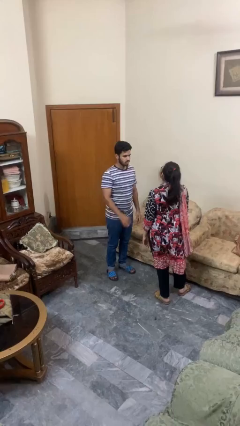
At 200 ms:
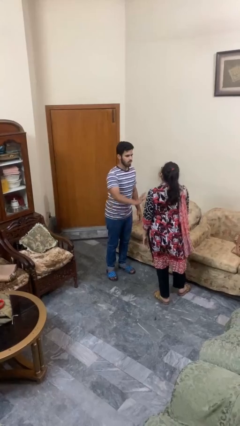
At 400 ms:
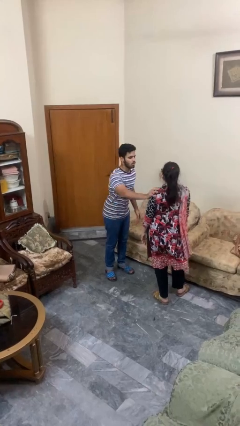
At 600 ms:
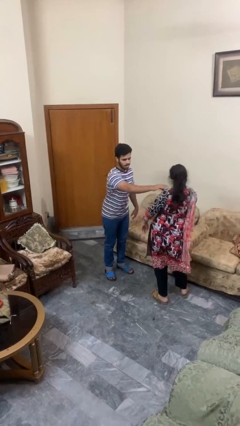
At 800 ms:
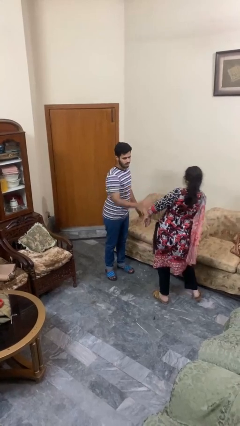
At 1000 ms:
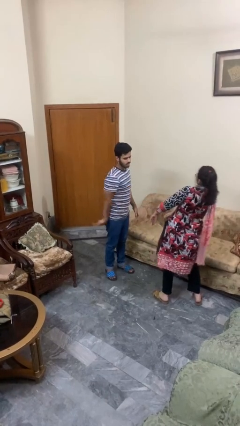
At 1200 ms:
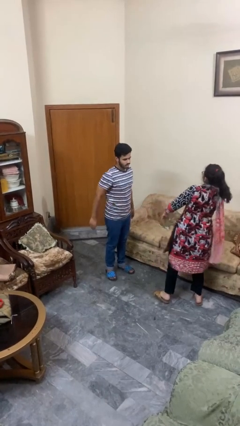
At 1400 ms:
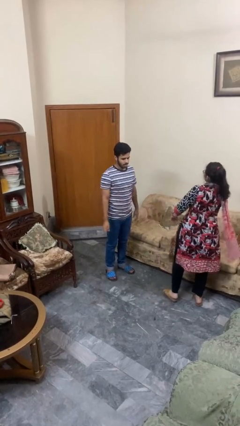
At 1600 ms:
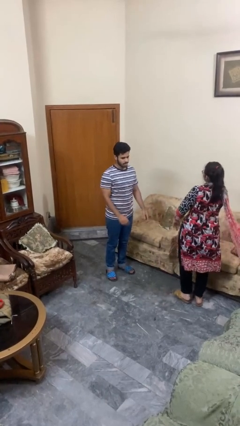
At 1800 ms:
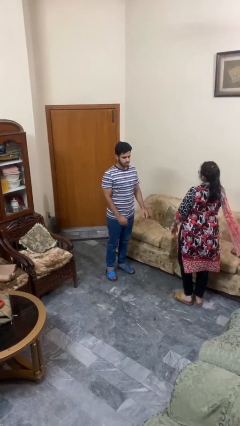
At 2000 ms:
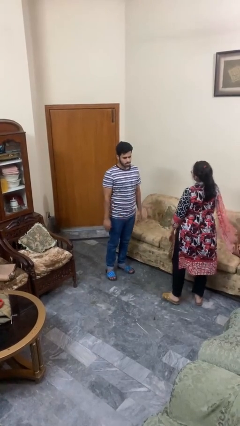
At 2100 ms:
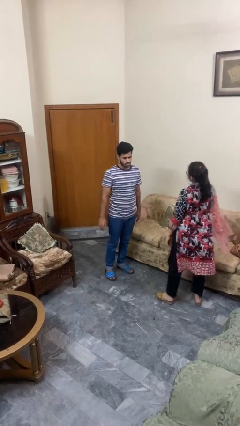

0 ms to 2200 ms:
person shoves person

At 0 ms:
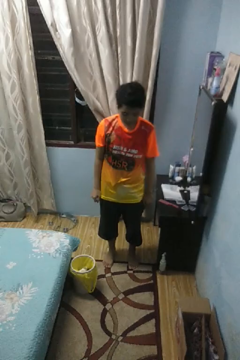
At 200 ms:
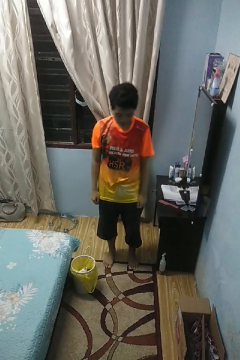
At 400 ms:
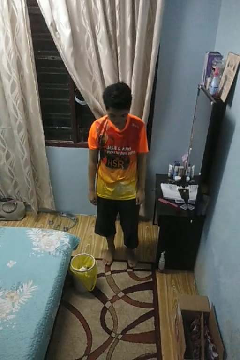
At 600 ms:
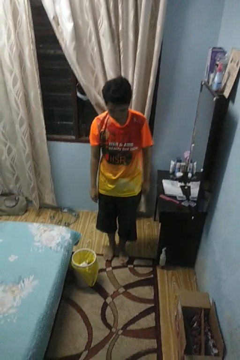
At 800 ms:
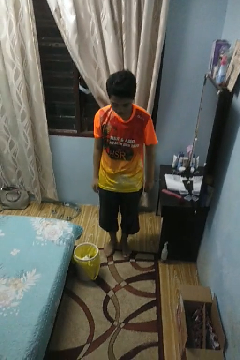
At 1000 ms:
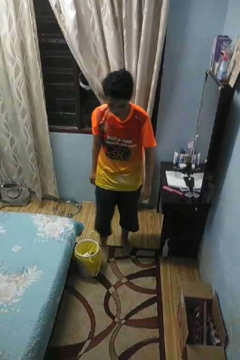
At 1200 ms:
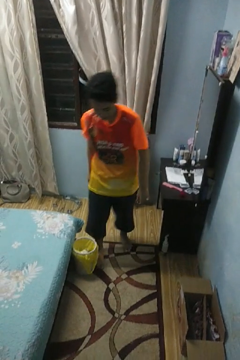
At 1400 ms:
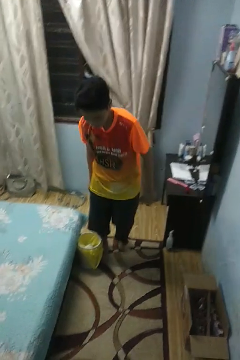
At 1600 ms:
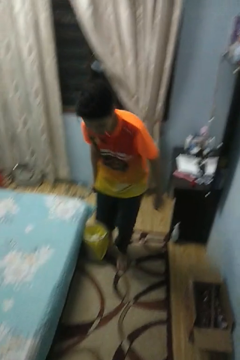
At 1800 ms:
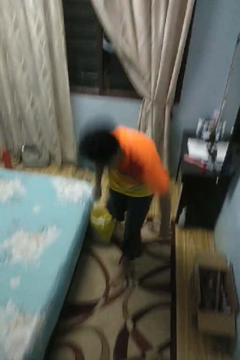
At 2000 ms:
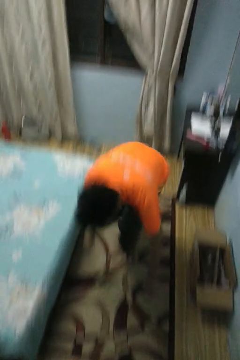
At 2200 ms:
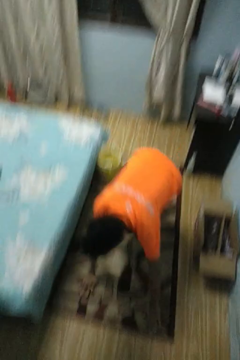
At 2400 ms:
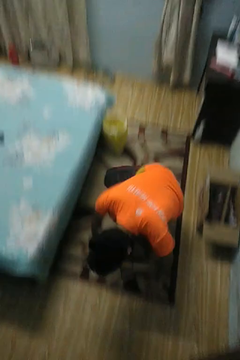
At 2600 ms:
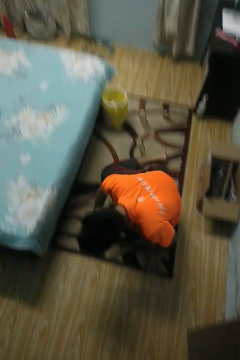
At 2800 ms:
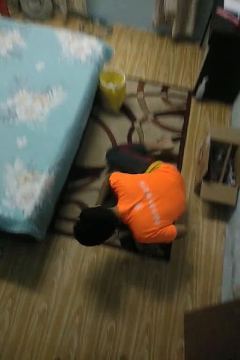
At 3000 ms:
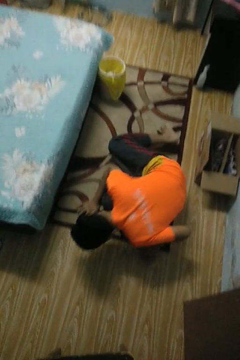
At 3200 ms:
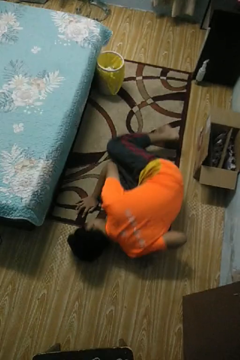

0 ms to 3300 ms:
person trips on object on floor

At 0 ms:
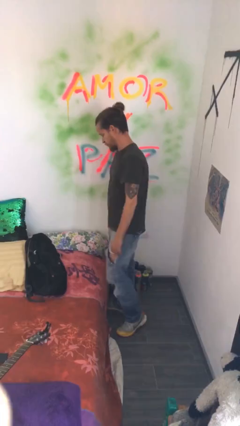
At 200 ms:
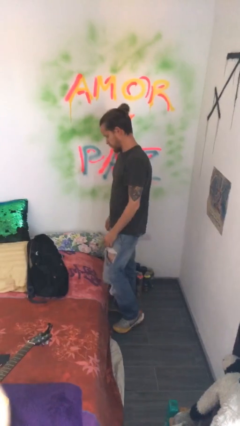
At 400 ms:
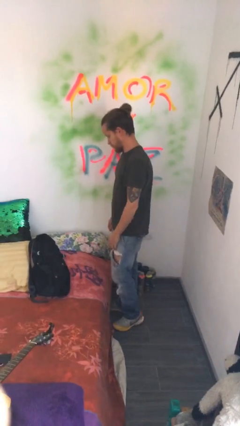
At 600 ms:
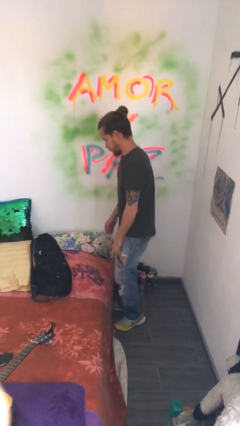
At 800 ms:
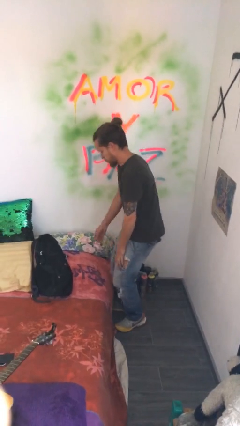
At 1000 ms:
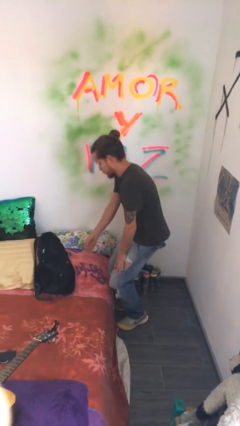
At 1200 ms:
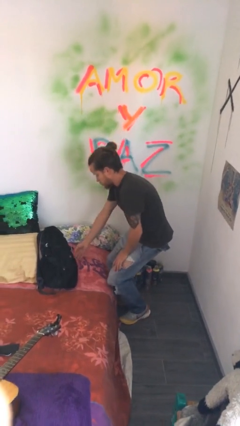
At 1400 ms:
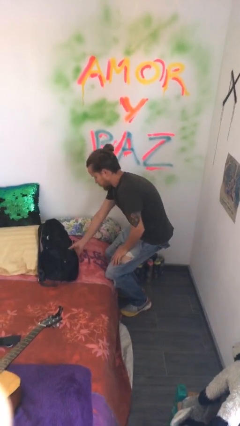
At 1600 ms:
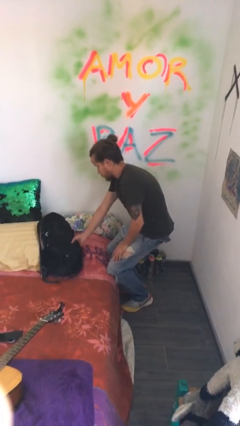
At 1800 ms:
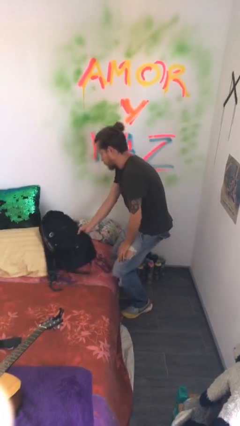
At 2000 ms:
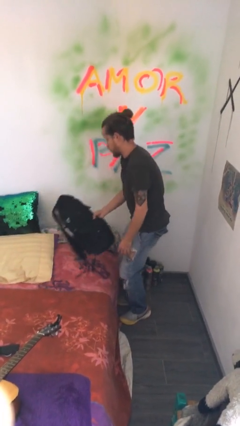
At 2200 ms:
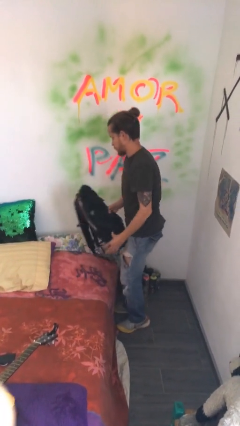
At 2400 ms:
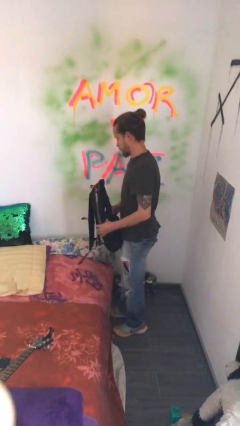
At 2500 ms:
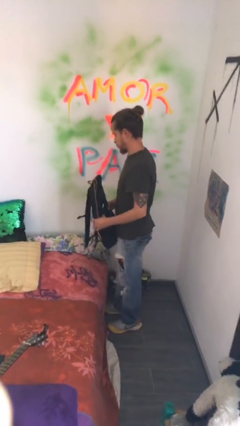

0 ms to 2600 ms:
person picks up object from bed

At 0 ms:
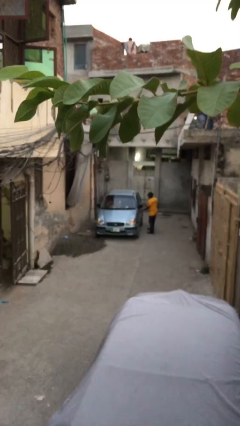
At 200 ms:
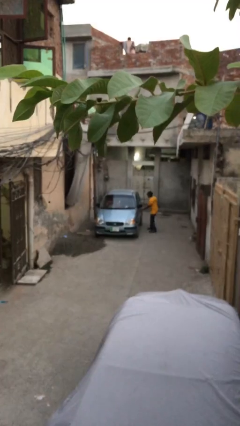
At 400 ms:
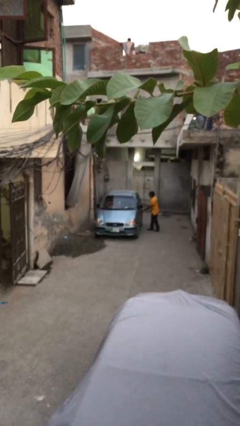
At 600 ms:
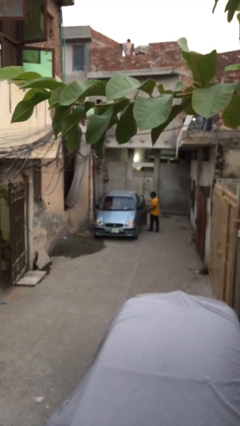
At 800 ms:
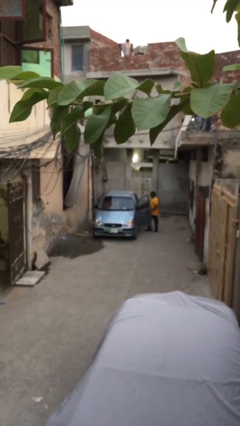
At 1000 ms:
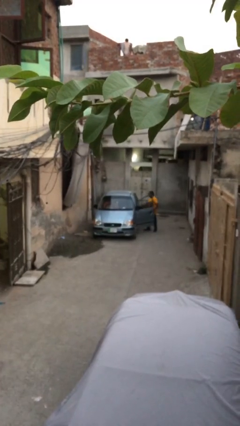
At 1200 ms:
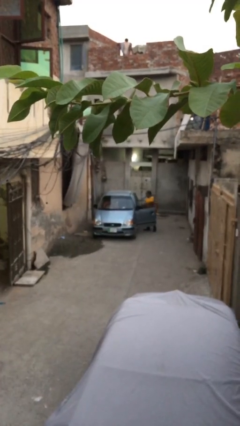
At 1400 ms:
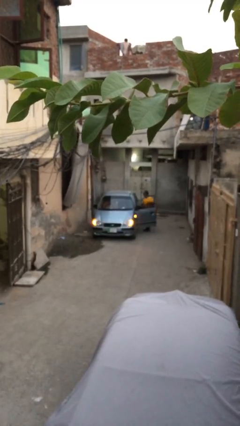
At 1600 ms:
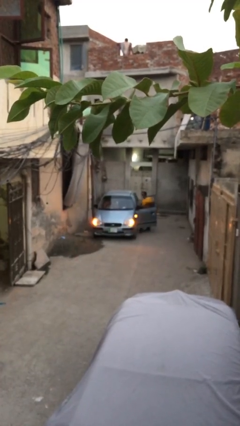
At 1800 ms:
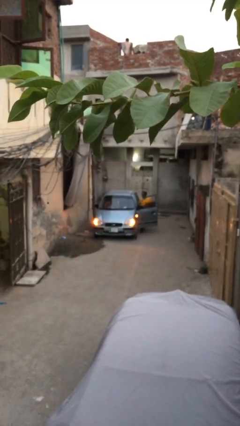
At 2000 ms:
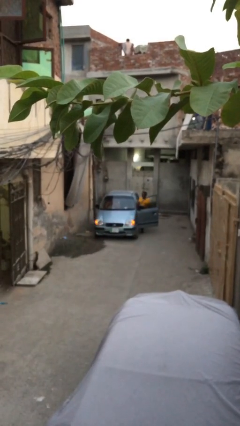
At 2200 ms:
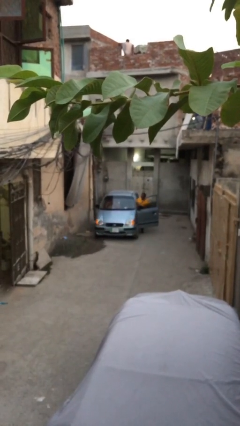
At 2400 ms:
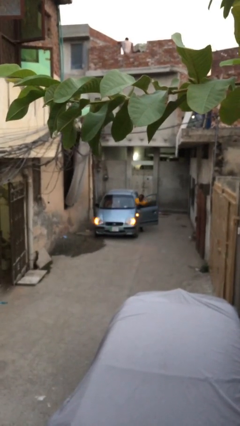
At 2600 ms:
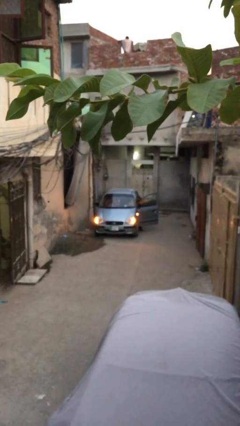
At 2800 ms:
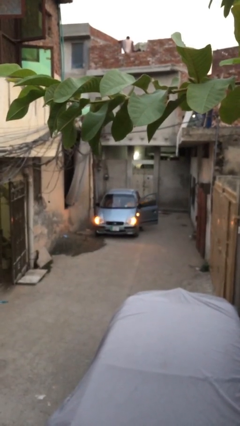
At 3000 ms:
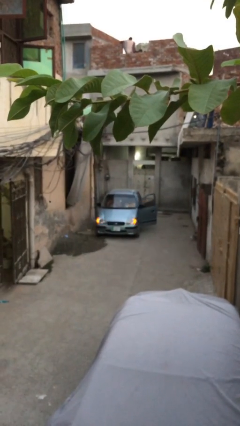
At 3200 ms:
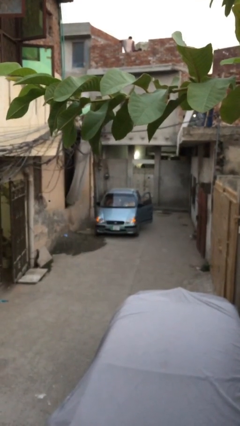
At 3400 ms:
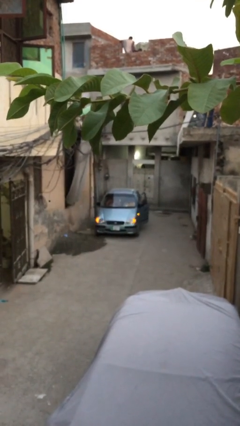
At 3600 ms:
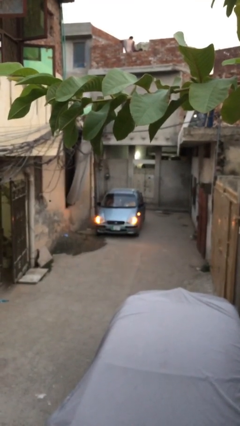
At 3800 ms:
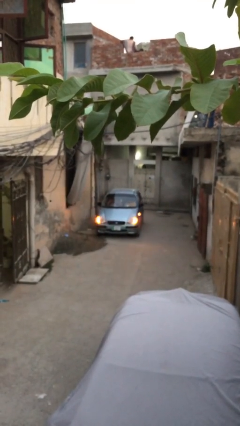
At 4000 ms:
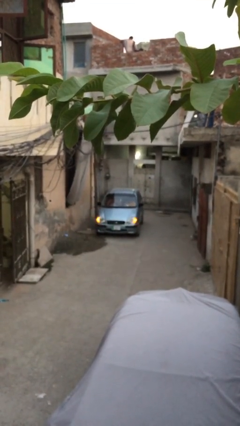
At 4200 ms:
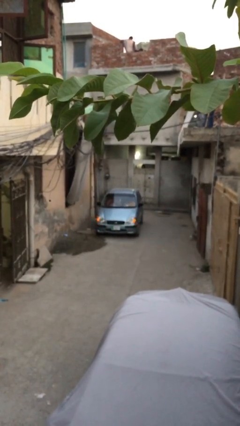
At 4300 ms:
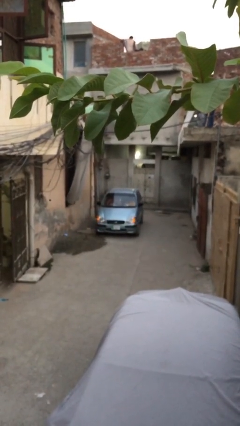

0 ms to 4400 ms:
car picks up person

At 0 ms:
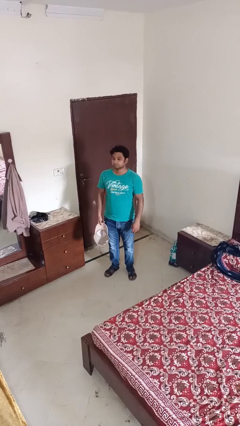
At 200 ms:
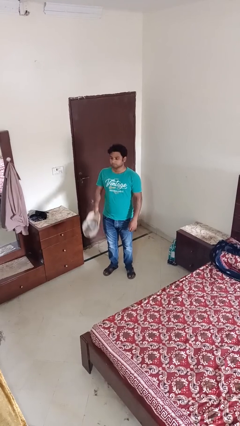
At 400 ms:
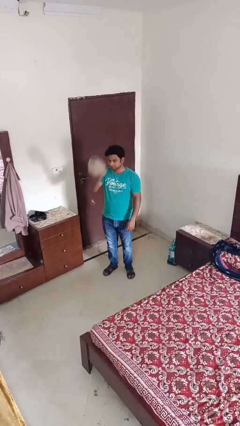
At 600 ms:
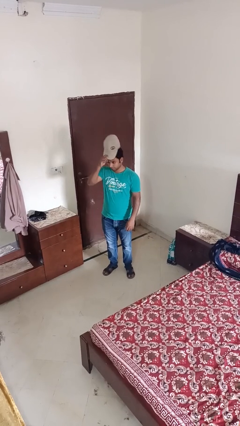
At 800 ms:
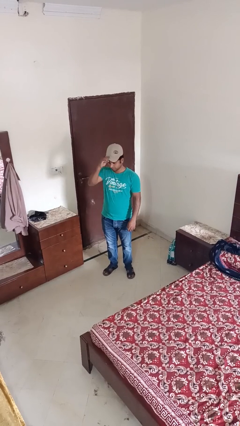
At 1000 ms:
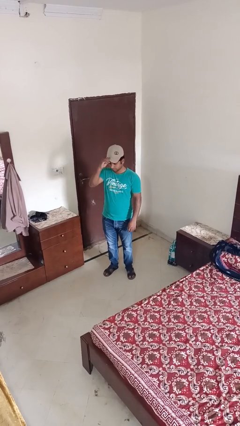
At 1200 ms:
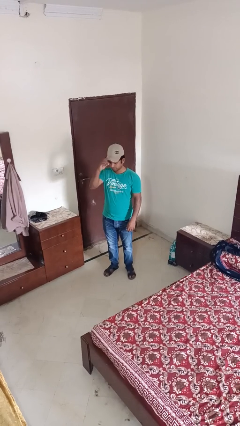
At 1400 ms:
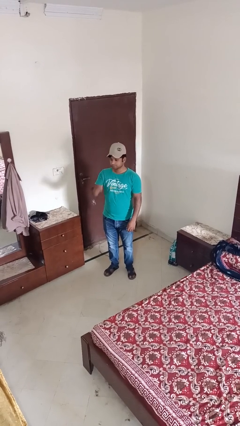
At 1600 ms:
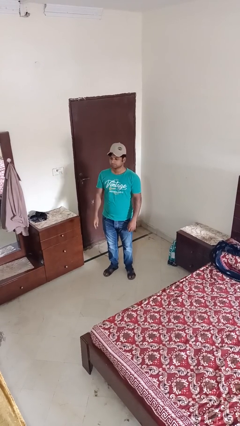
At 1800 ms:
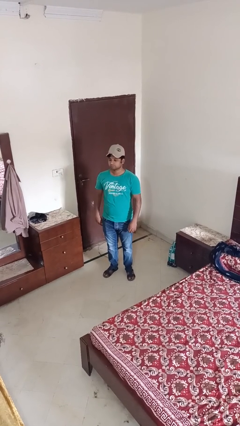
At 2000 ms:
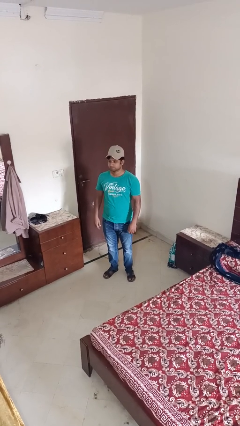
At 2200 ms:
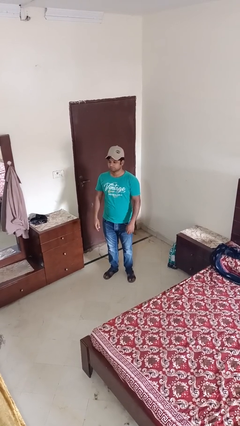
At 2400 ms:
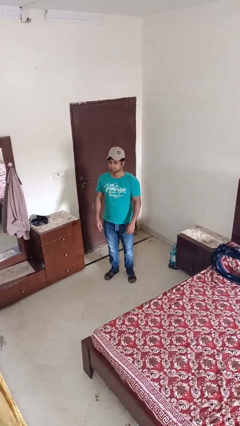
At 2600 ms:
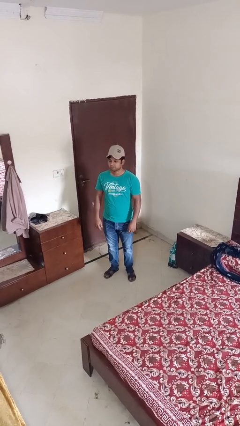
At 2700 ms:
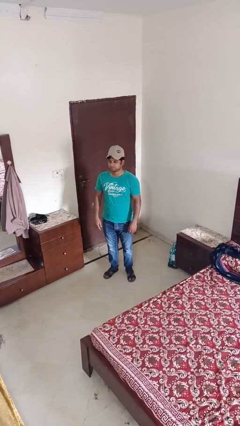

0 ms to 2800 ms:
person puts on hat

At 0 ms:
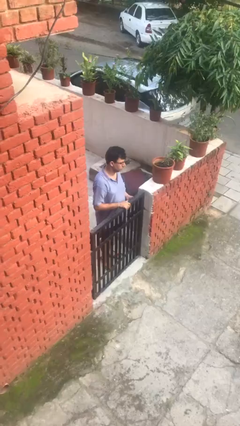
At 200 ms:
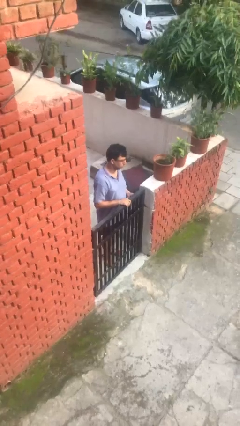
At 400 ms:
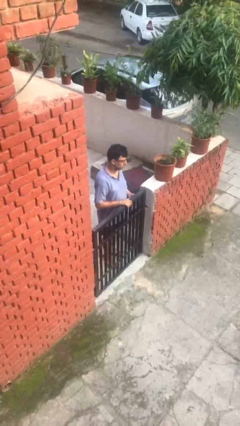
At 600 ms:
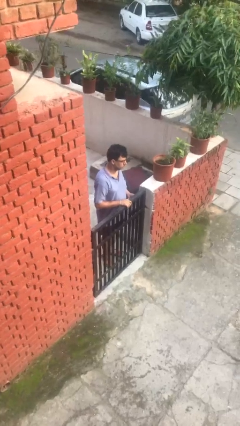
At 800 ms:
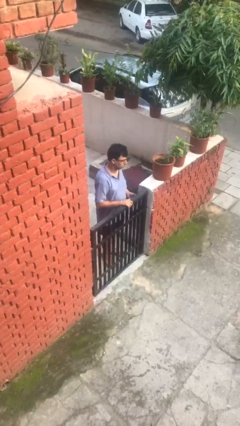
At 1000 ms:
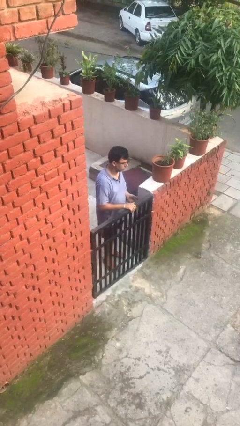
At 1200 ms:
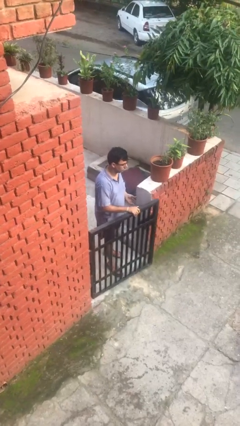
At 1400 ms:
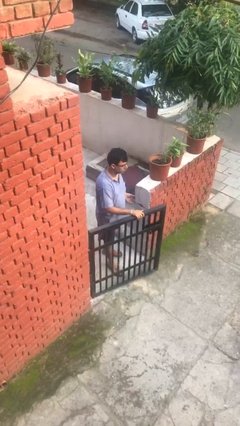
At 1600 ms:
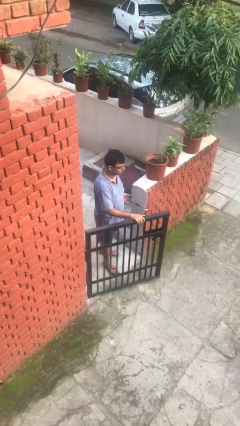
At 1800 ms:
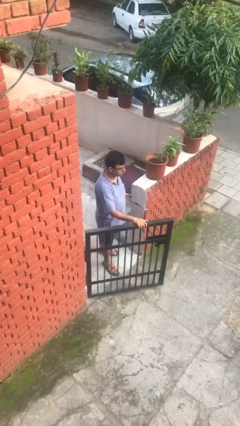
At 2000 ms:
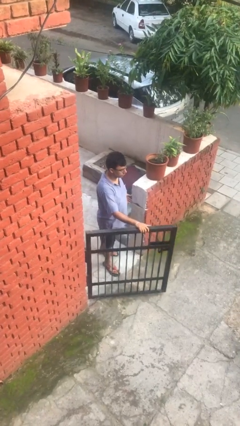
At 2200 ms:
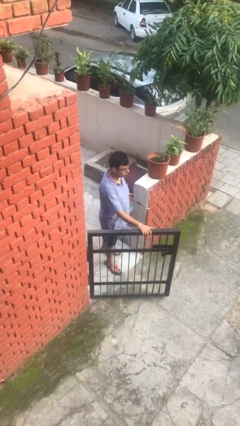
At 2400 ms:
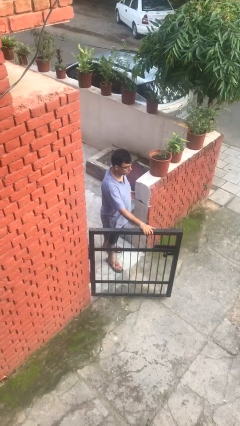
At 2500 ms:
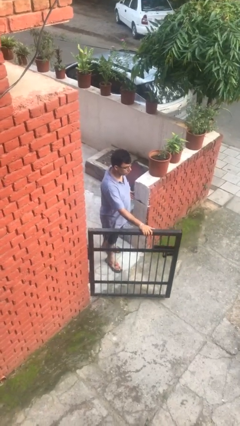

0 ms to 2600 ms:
person opens gate

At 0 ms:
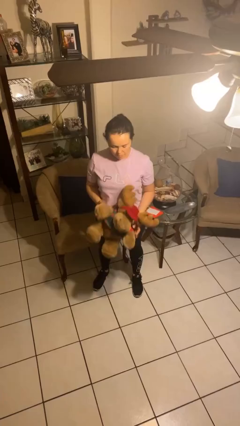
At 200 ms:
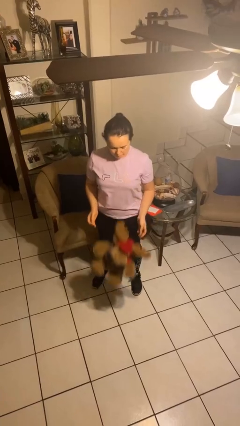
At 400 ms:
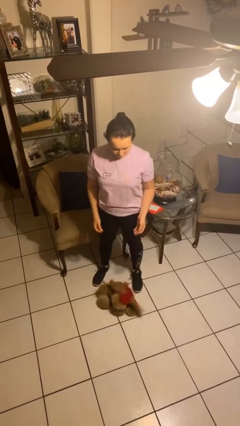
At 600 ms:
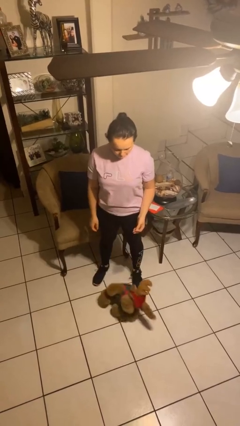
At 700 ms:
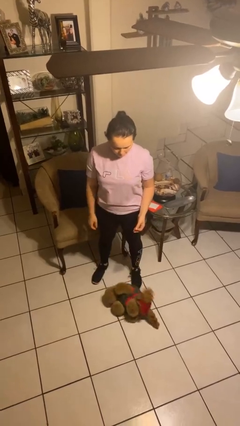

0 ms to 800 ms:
person drops object
